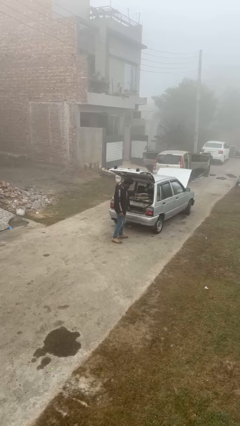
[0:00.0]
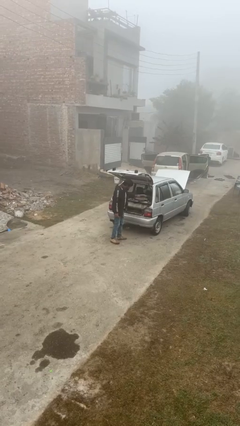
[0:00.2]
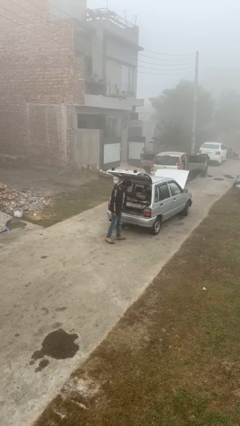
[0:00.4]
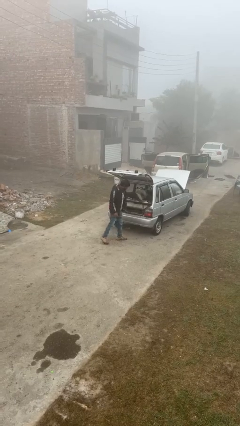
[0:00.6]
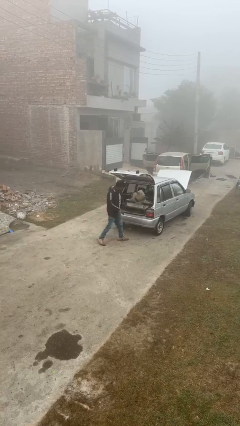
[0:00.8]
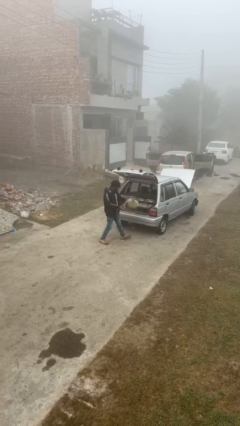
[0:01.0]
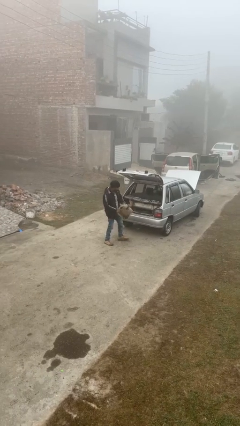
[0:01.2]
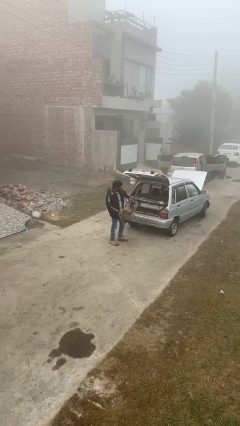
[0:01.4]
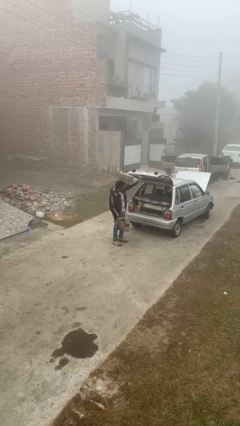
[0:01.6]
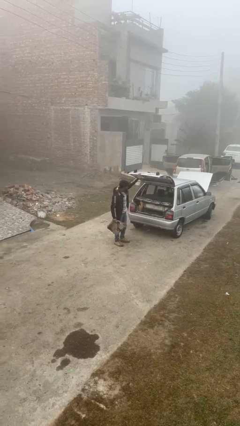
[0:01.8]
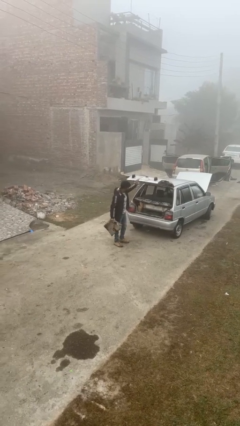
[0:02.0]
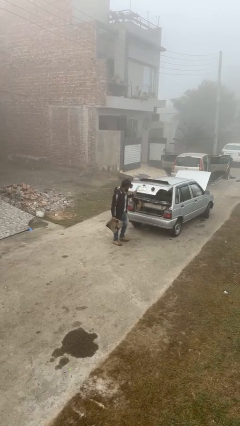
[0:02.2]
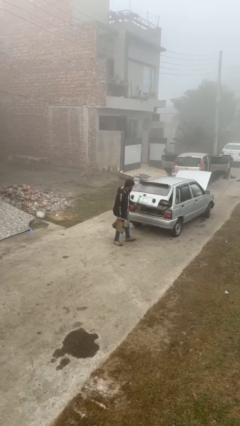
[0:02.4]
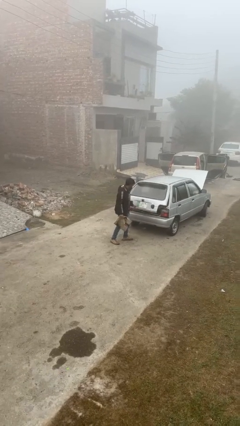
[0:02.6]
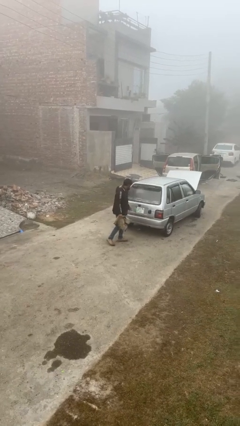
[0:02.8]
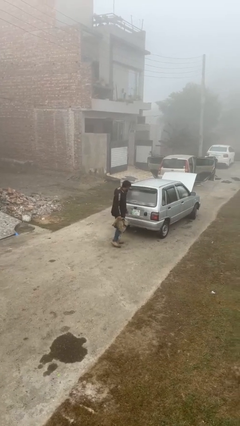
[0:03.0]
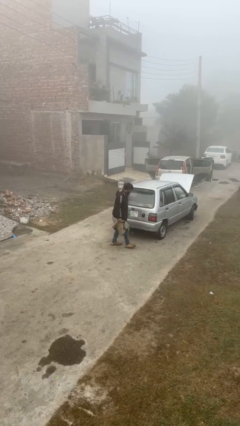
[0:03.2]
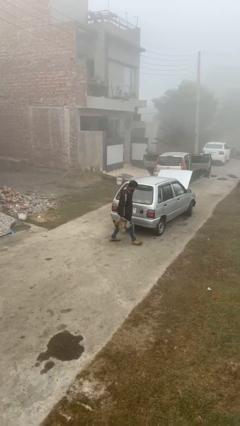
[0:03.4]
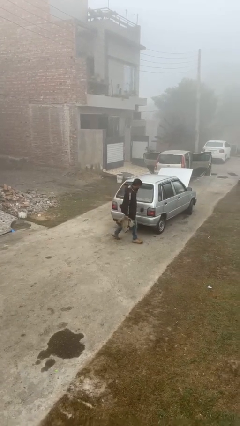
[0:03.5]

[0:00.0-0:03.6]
person unloads car

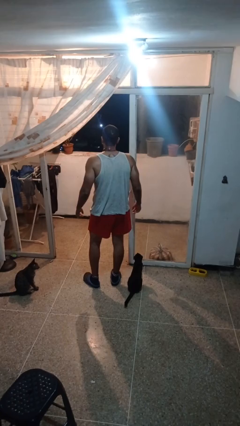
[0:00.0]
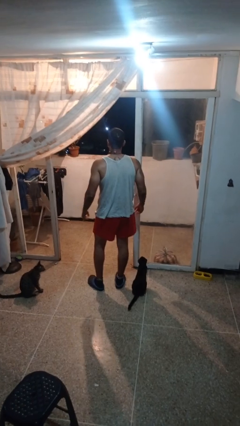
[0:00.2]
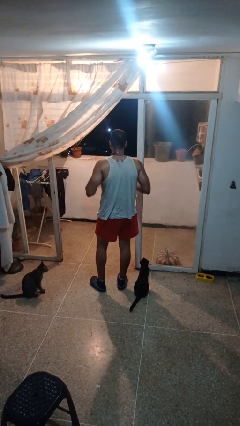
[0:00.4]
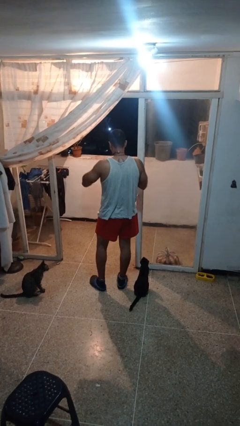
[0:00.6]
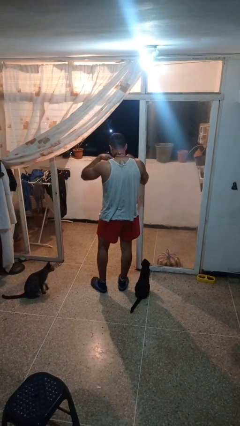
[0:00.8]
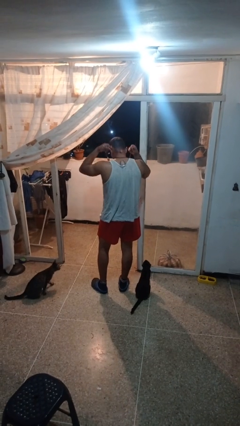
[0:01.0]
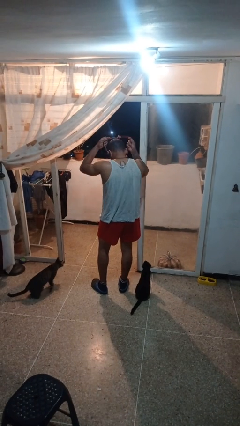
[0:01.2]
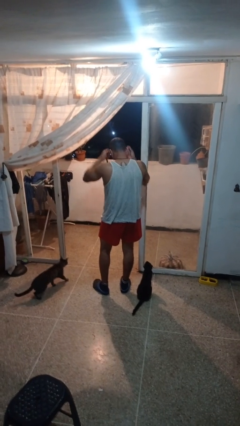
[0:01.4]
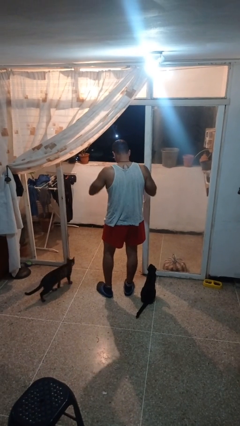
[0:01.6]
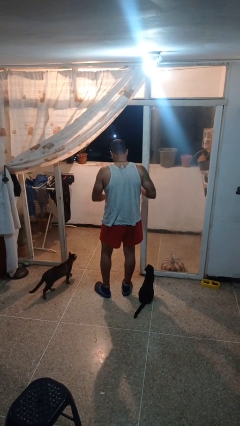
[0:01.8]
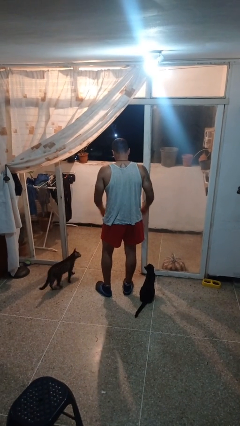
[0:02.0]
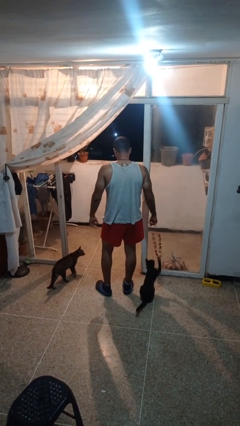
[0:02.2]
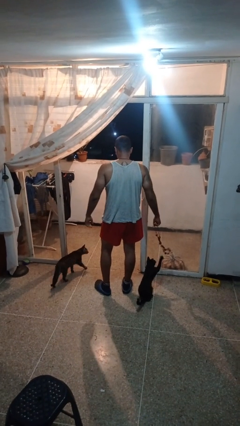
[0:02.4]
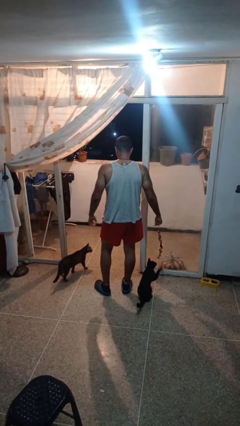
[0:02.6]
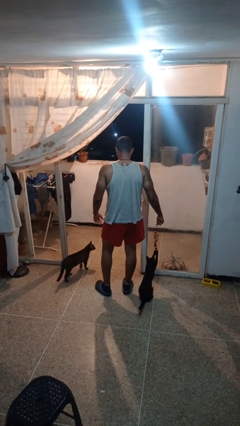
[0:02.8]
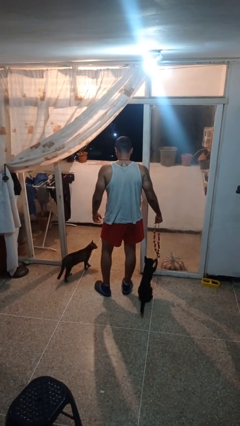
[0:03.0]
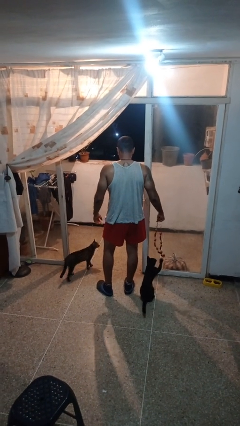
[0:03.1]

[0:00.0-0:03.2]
person takes off necklace

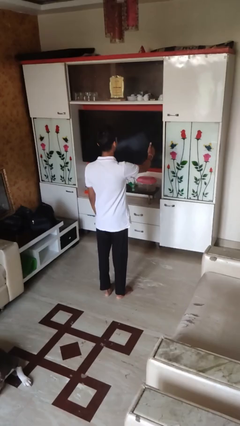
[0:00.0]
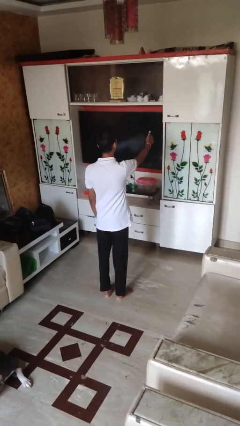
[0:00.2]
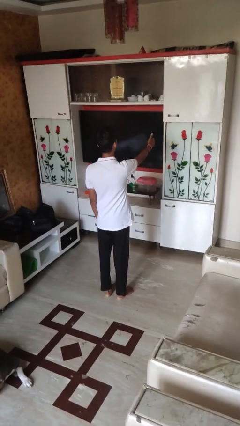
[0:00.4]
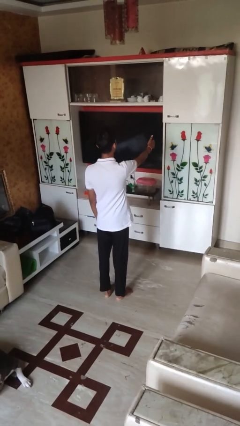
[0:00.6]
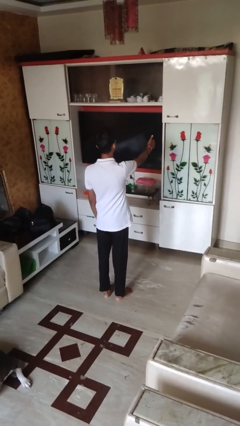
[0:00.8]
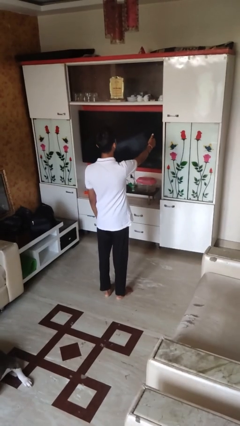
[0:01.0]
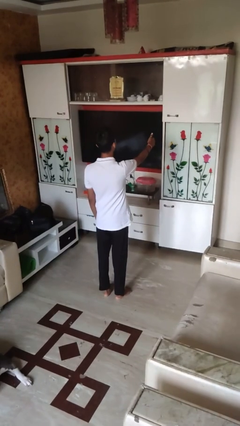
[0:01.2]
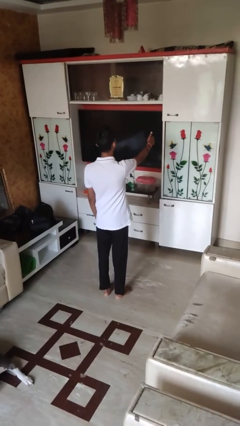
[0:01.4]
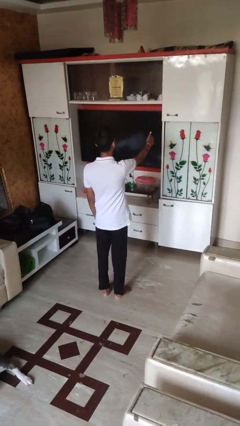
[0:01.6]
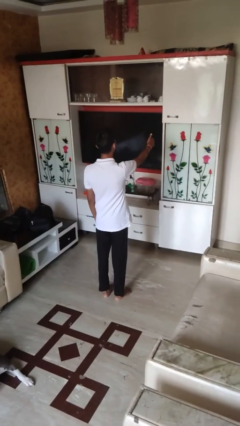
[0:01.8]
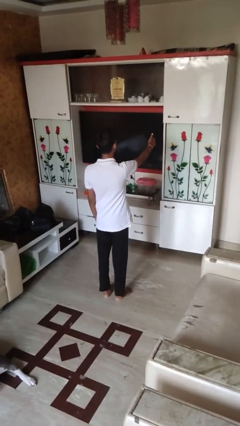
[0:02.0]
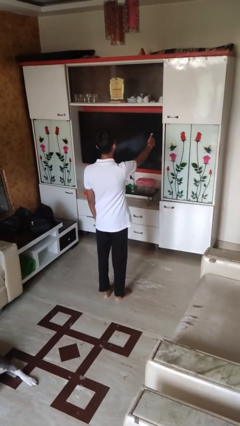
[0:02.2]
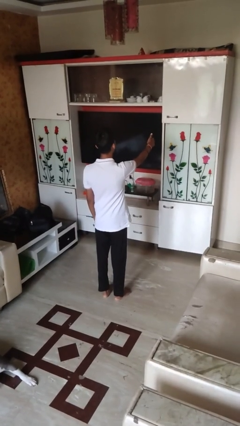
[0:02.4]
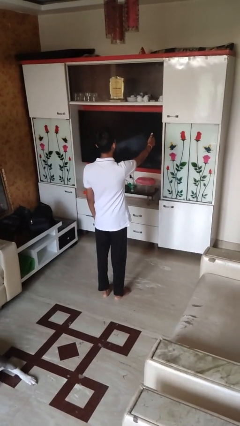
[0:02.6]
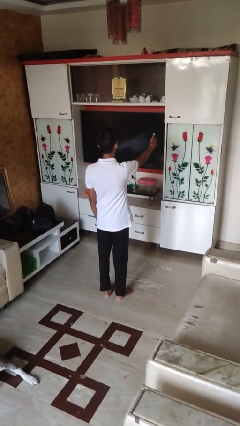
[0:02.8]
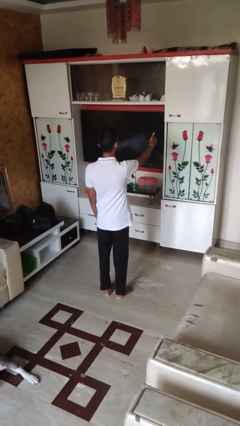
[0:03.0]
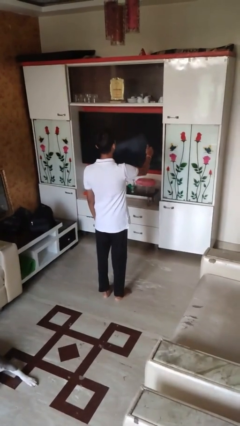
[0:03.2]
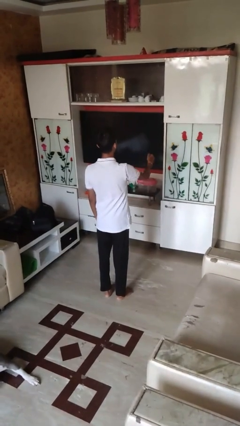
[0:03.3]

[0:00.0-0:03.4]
person gestures thumbs up

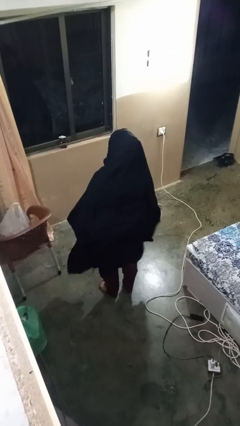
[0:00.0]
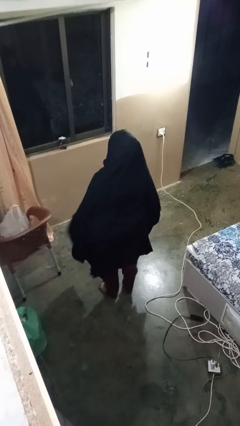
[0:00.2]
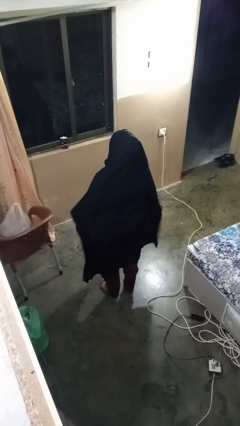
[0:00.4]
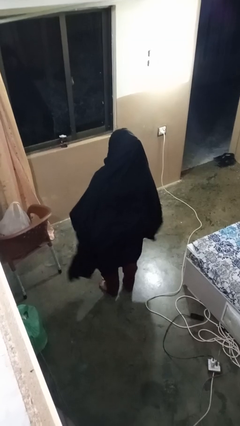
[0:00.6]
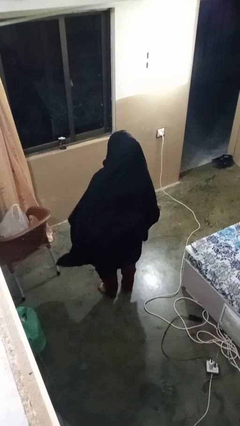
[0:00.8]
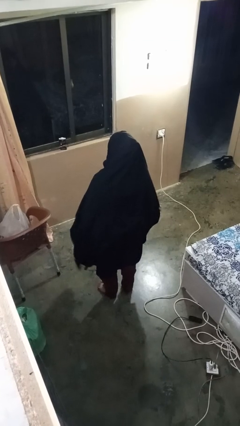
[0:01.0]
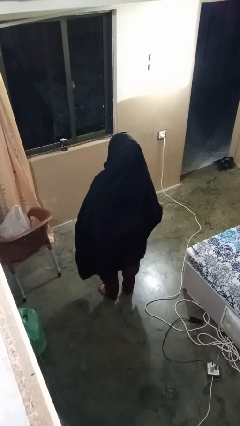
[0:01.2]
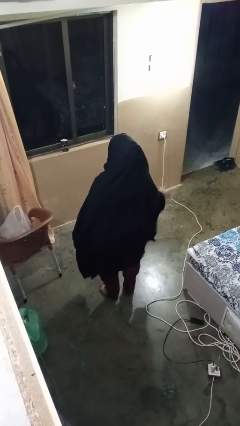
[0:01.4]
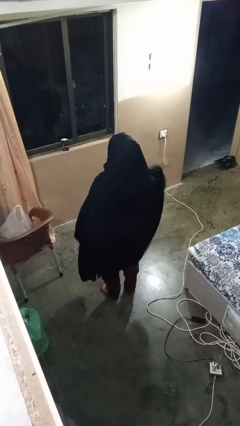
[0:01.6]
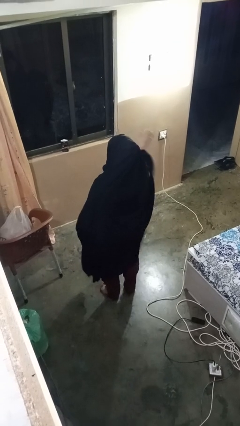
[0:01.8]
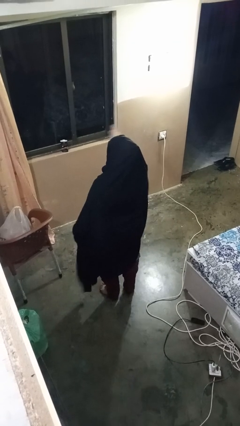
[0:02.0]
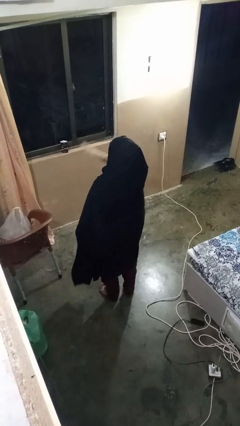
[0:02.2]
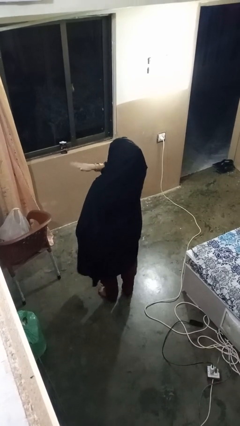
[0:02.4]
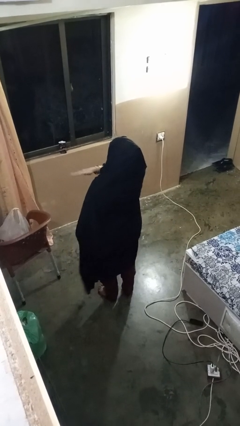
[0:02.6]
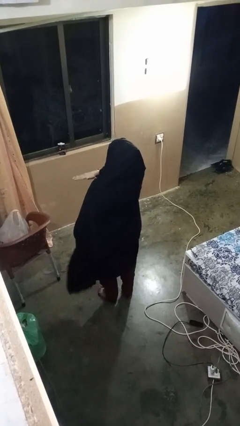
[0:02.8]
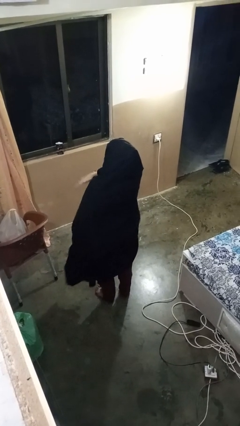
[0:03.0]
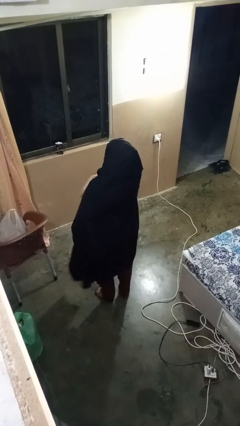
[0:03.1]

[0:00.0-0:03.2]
person gestures swipe left

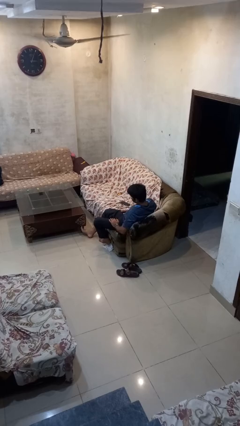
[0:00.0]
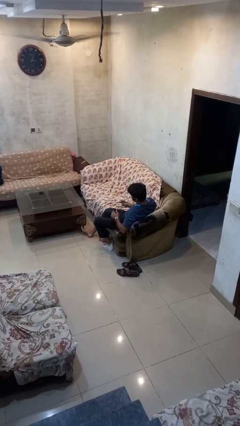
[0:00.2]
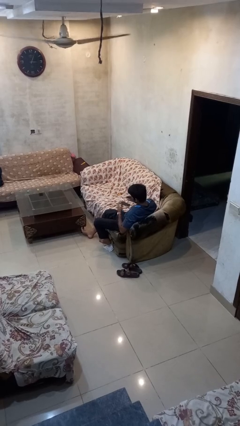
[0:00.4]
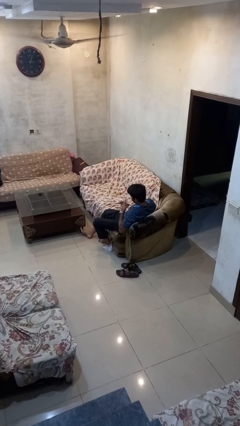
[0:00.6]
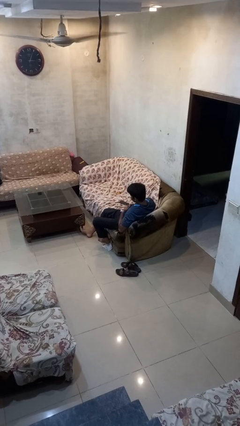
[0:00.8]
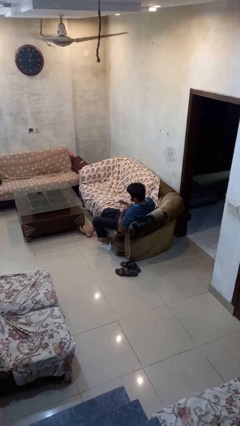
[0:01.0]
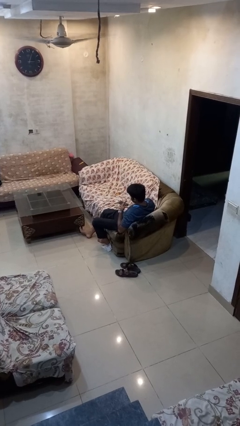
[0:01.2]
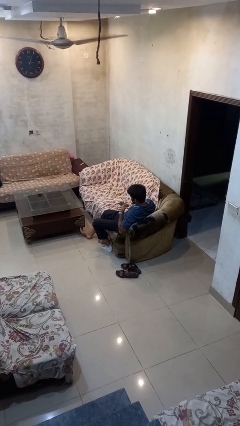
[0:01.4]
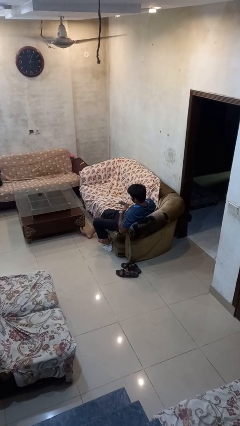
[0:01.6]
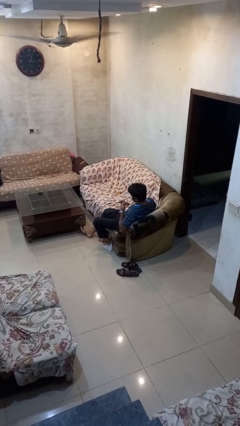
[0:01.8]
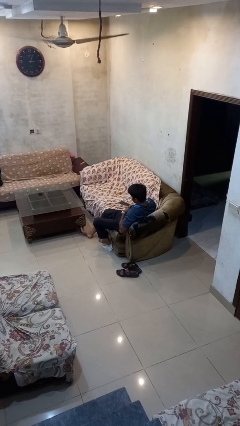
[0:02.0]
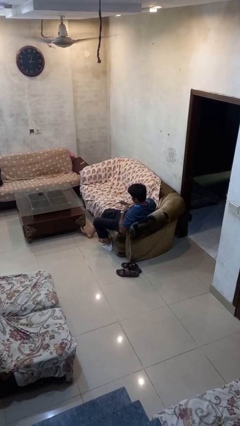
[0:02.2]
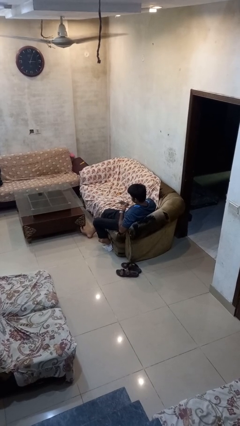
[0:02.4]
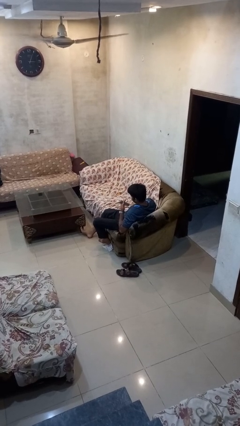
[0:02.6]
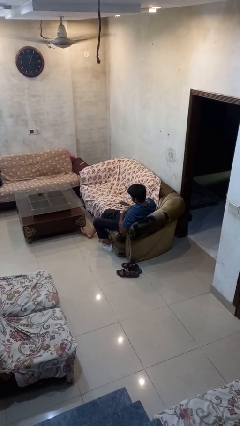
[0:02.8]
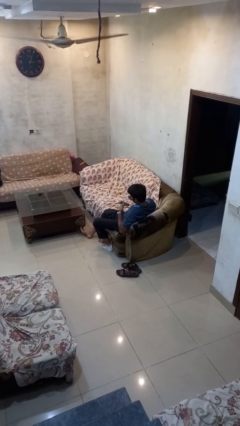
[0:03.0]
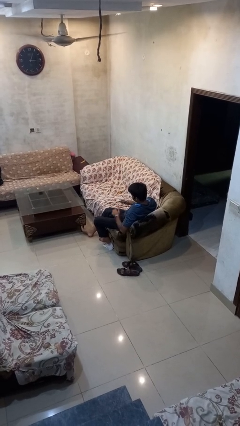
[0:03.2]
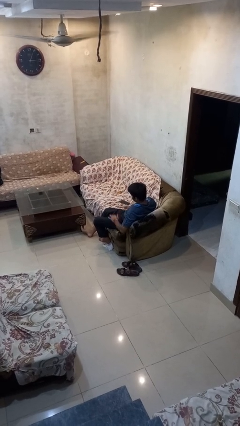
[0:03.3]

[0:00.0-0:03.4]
person drums on chest

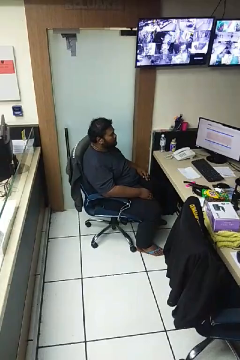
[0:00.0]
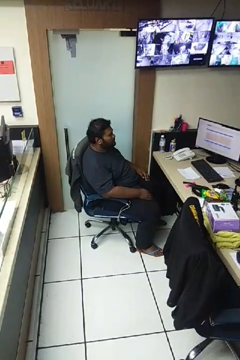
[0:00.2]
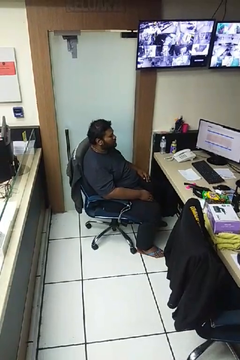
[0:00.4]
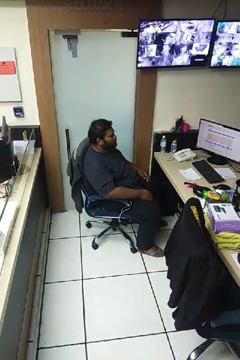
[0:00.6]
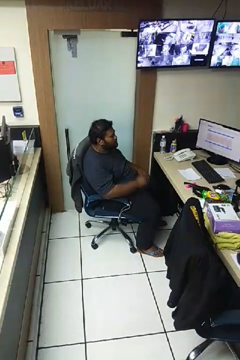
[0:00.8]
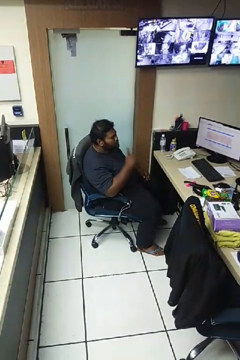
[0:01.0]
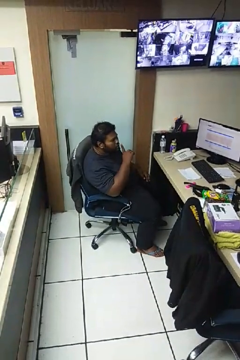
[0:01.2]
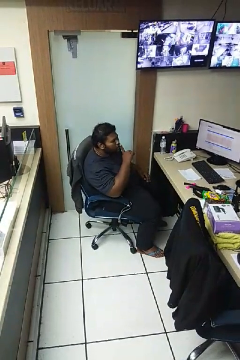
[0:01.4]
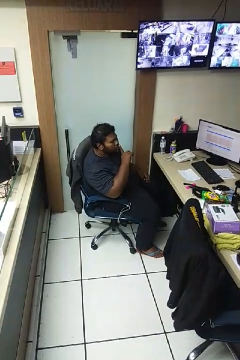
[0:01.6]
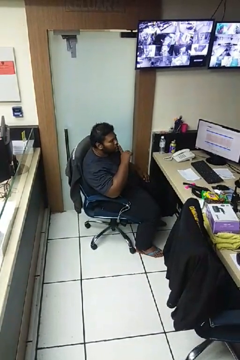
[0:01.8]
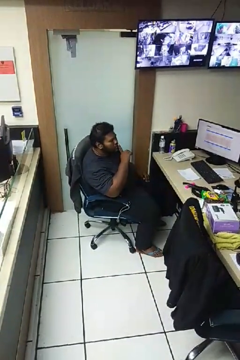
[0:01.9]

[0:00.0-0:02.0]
person gestures be quiet
